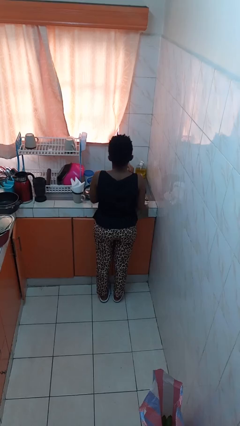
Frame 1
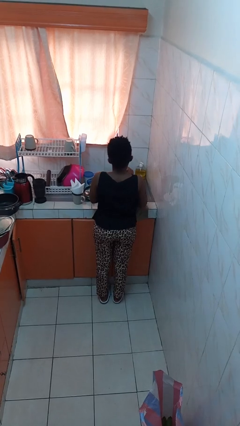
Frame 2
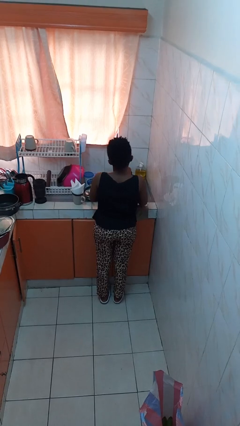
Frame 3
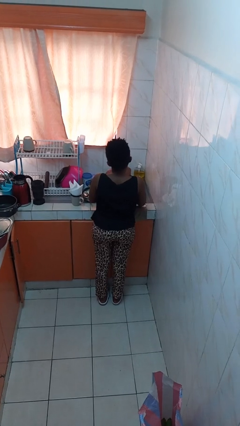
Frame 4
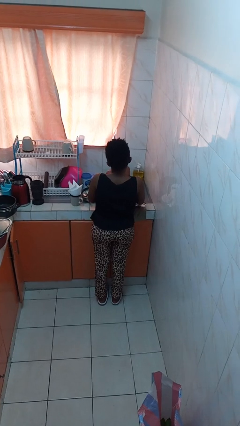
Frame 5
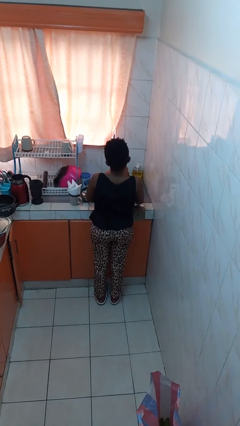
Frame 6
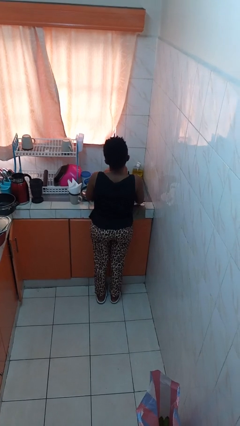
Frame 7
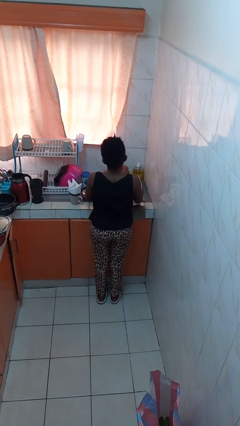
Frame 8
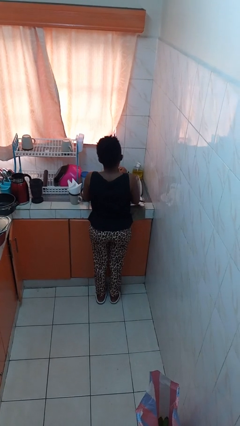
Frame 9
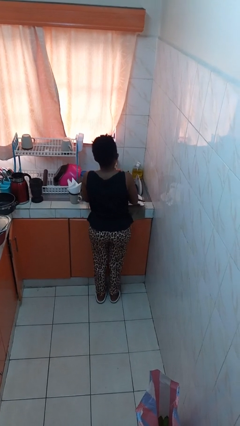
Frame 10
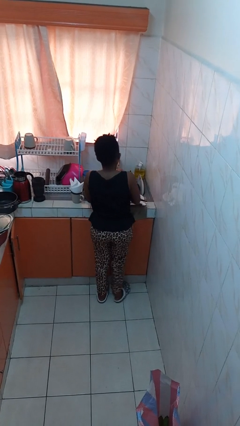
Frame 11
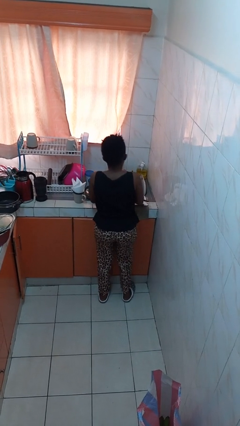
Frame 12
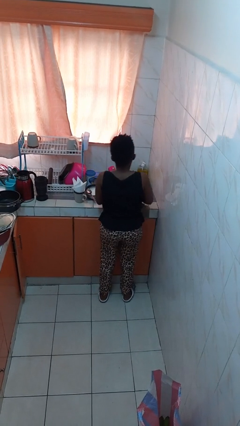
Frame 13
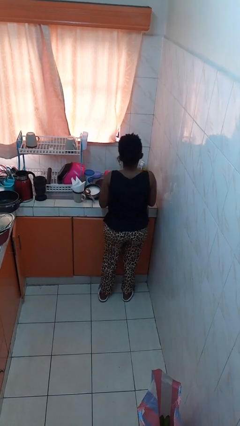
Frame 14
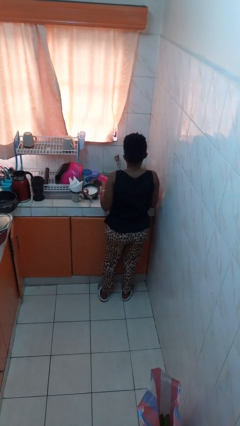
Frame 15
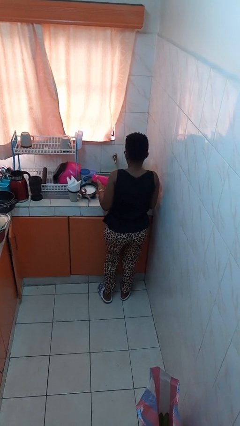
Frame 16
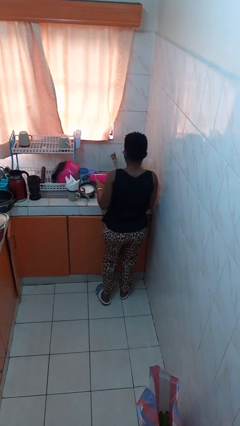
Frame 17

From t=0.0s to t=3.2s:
person washes dish

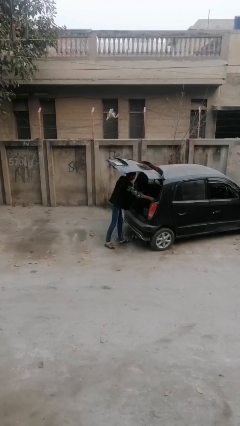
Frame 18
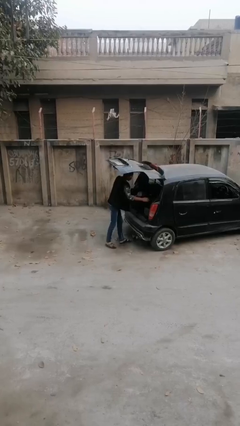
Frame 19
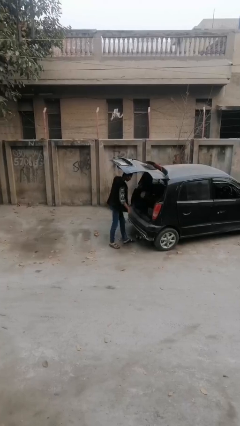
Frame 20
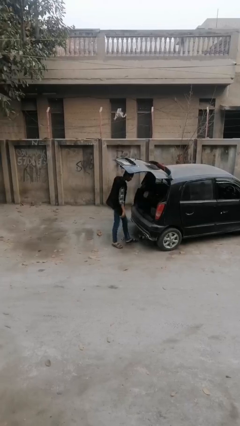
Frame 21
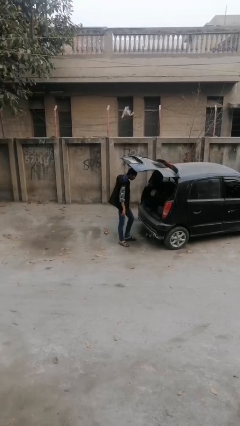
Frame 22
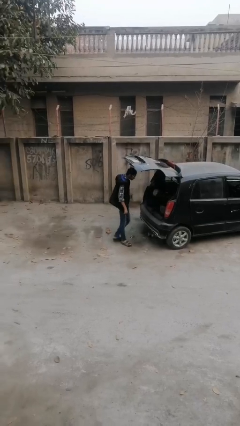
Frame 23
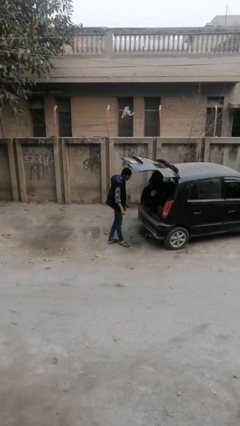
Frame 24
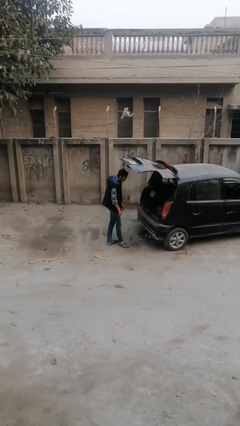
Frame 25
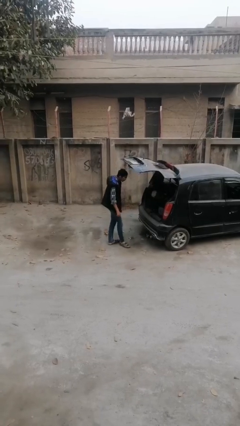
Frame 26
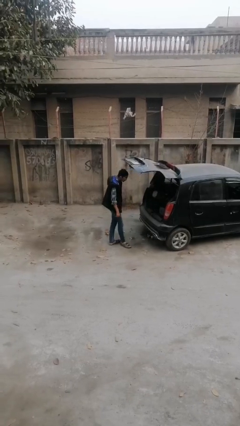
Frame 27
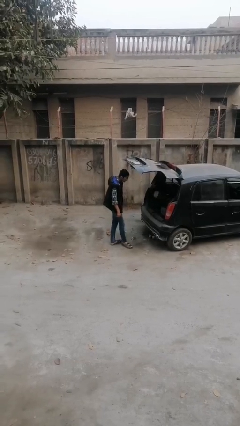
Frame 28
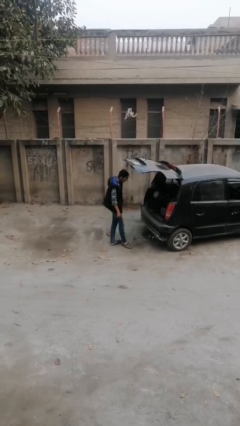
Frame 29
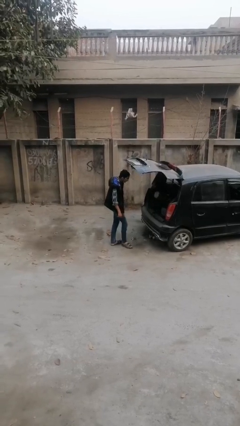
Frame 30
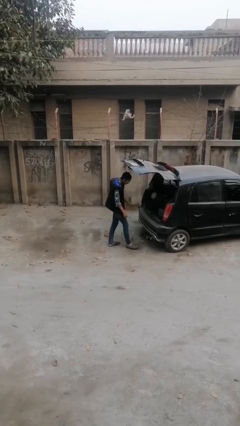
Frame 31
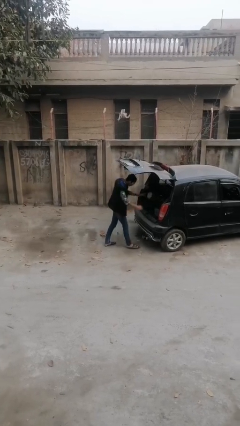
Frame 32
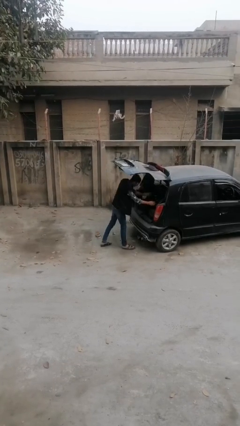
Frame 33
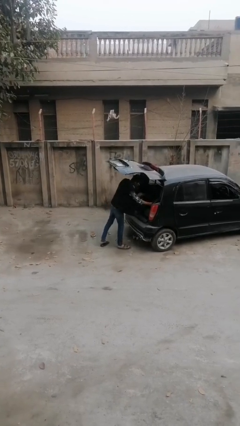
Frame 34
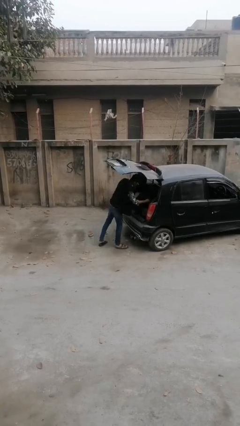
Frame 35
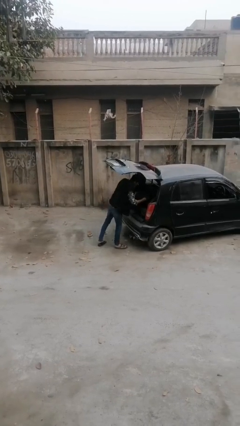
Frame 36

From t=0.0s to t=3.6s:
person loads car

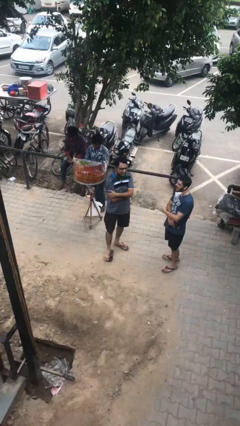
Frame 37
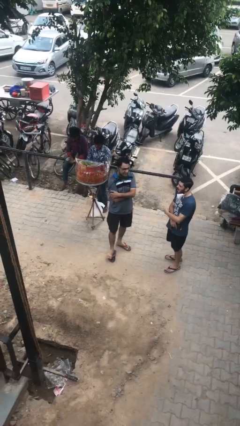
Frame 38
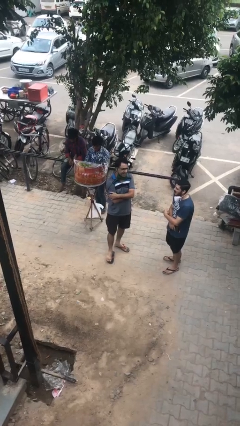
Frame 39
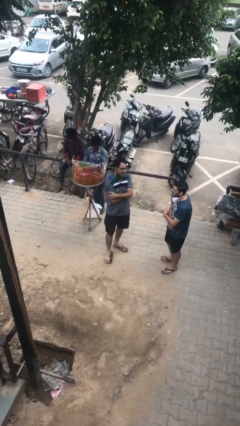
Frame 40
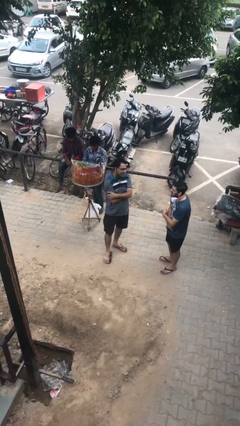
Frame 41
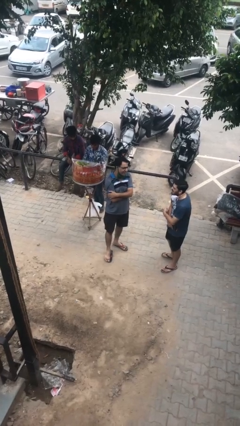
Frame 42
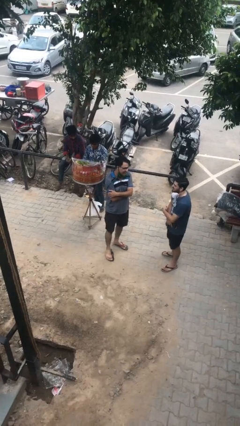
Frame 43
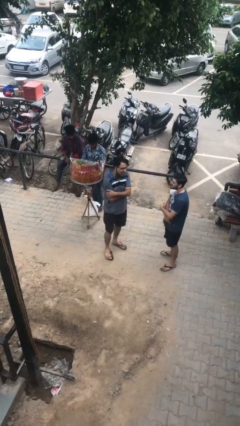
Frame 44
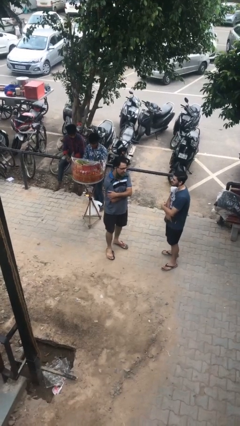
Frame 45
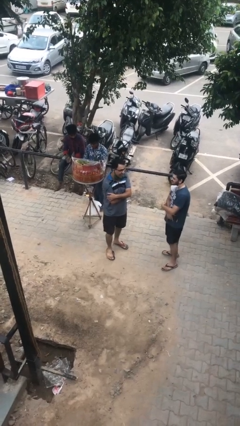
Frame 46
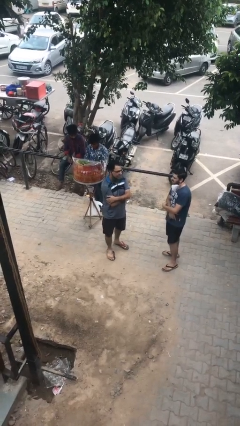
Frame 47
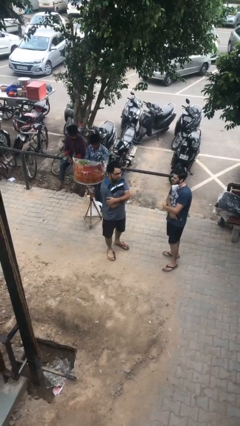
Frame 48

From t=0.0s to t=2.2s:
person laughs with person

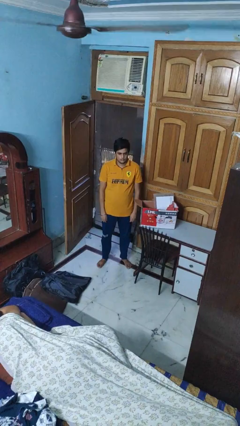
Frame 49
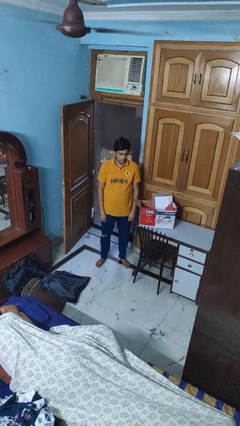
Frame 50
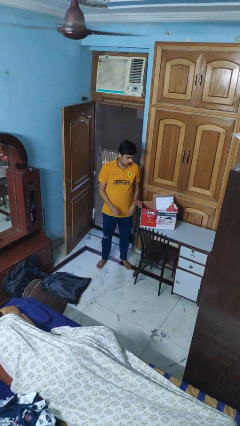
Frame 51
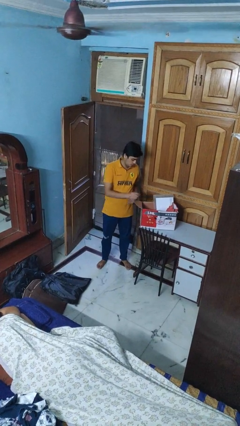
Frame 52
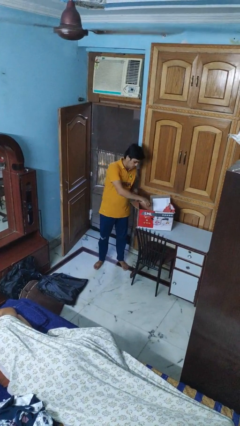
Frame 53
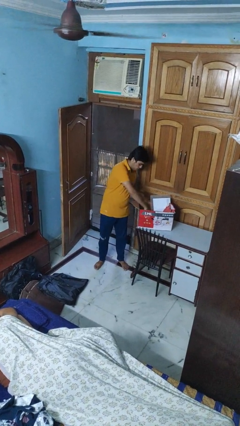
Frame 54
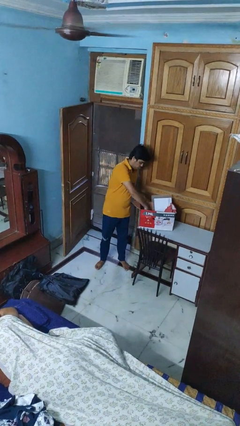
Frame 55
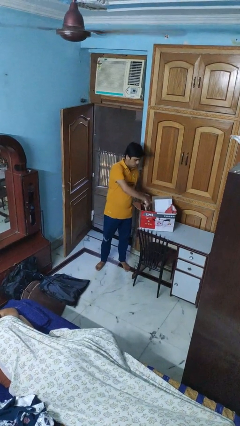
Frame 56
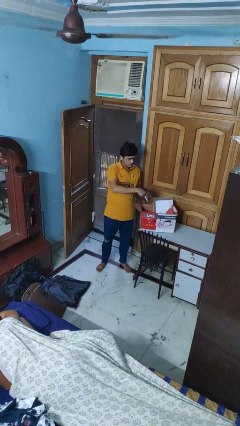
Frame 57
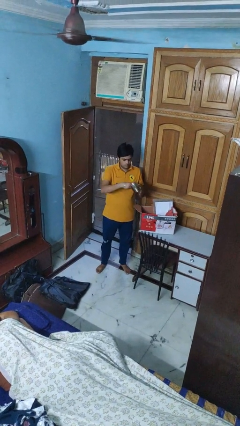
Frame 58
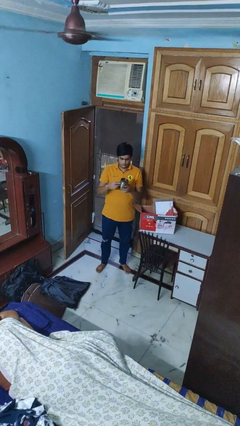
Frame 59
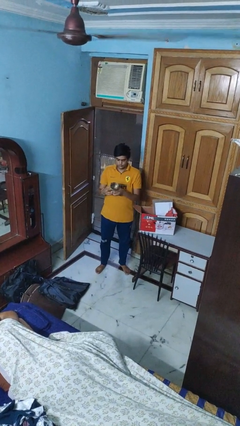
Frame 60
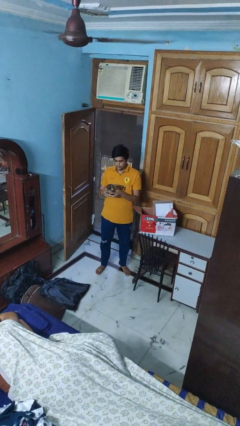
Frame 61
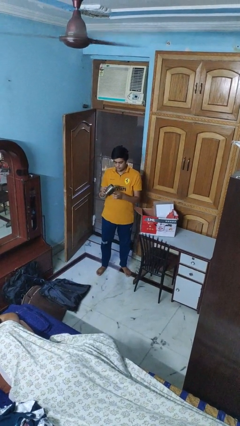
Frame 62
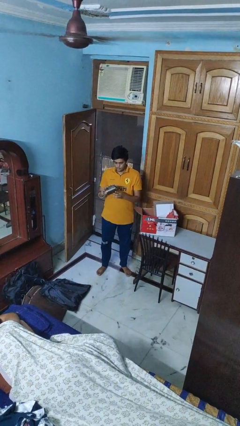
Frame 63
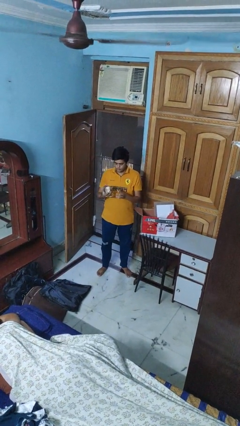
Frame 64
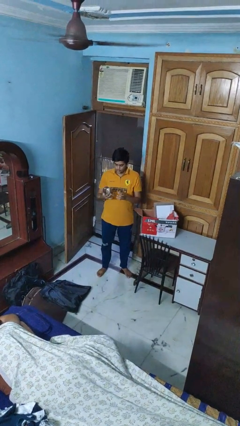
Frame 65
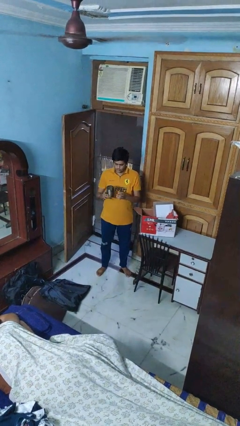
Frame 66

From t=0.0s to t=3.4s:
person takes object from box

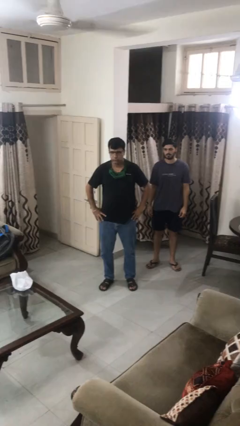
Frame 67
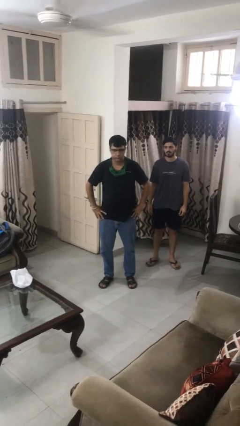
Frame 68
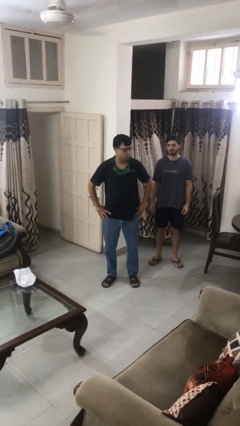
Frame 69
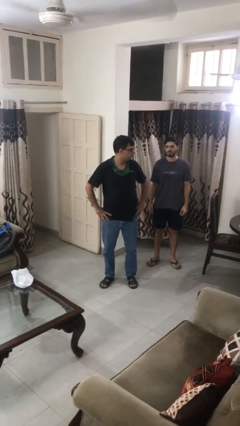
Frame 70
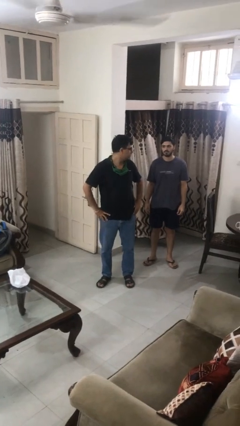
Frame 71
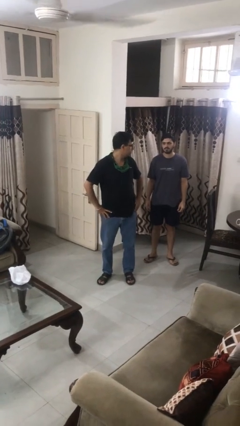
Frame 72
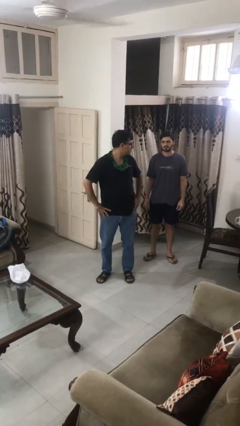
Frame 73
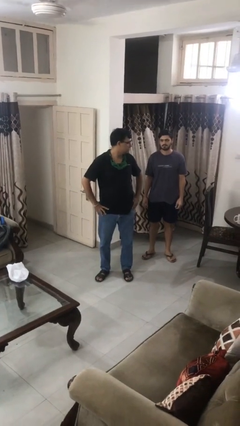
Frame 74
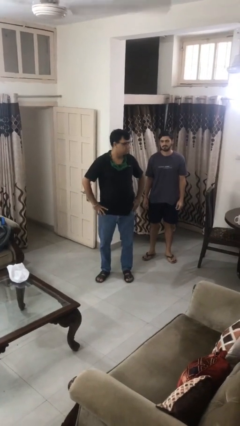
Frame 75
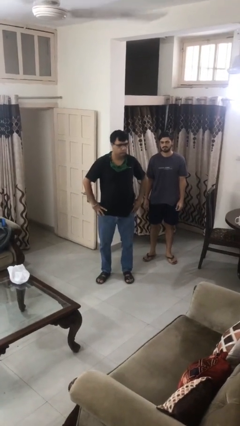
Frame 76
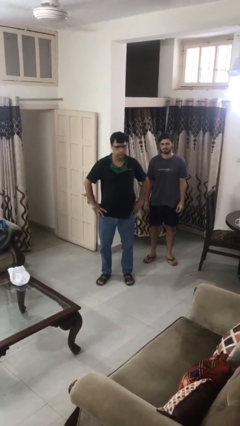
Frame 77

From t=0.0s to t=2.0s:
person looks over shoulder

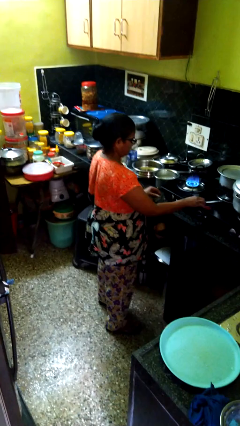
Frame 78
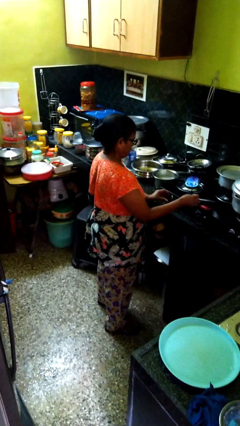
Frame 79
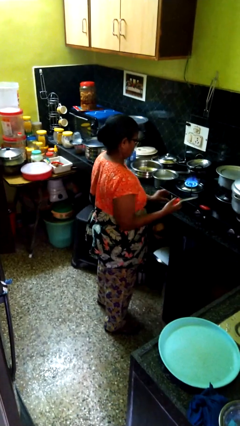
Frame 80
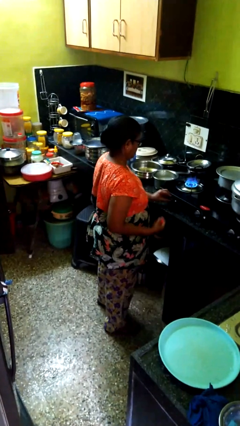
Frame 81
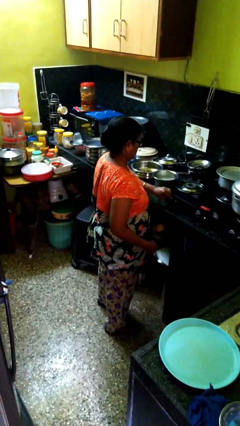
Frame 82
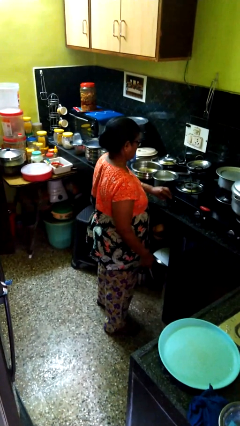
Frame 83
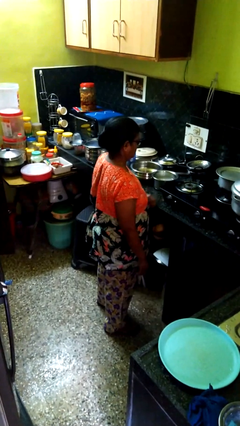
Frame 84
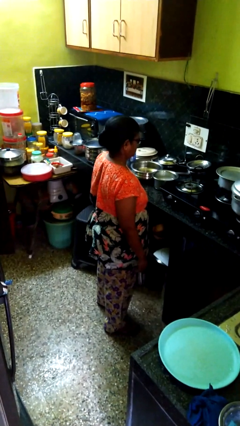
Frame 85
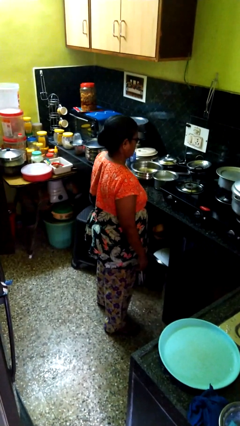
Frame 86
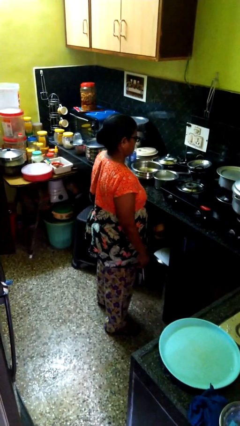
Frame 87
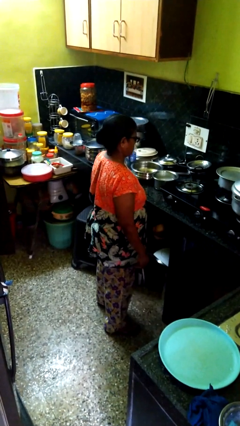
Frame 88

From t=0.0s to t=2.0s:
person turns off stovetop

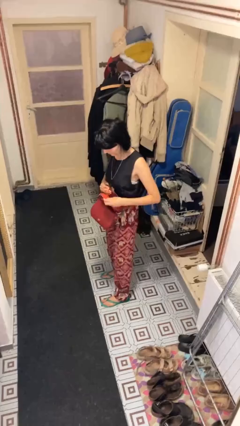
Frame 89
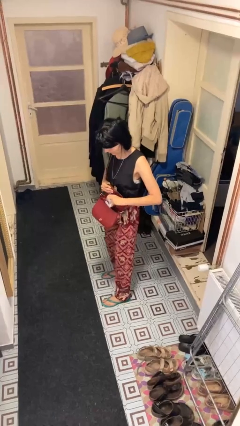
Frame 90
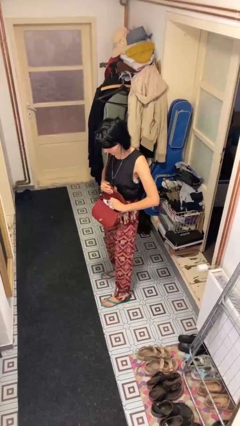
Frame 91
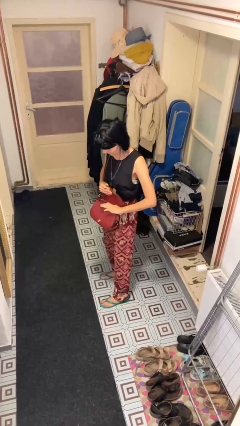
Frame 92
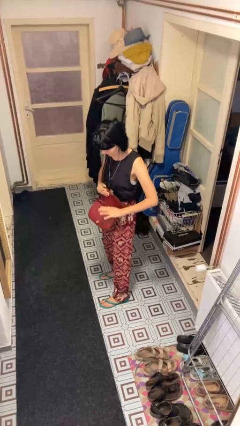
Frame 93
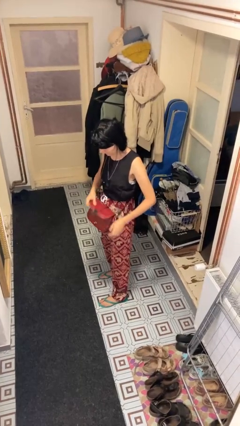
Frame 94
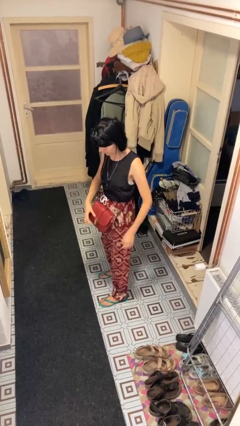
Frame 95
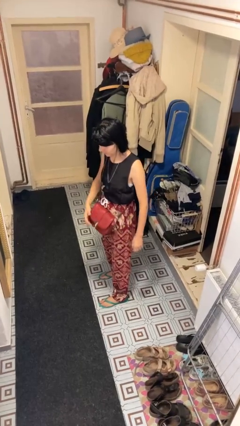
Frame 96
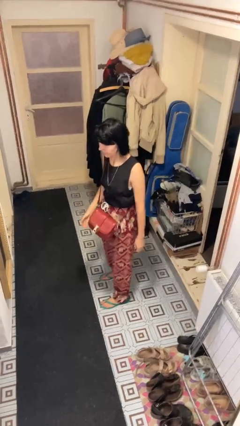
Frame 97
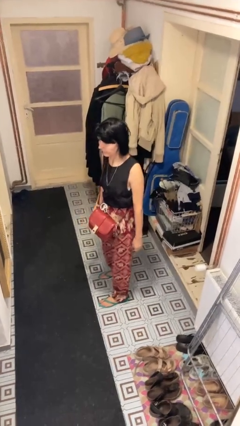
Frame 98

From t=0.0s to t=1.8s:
person puts object into purse
